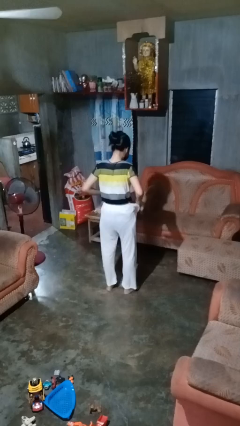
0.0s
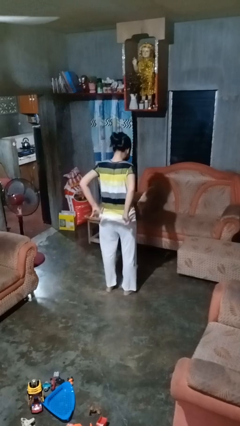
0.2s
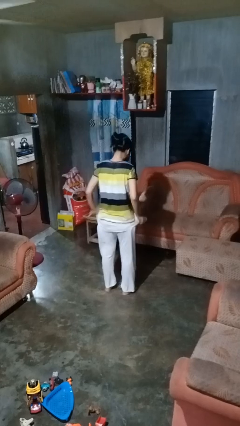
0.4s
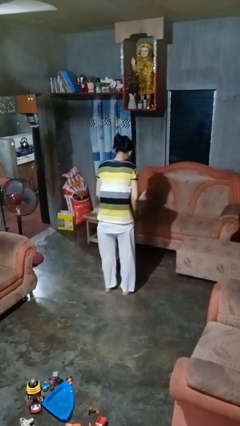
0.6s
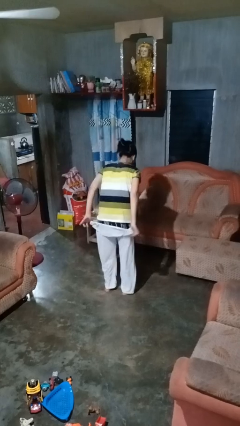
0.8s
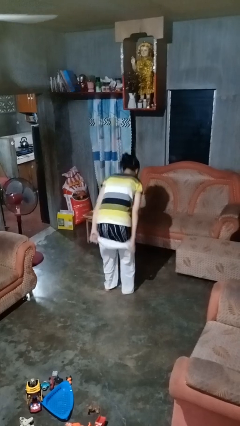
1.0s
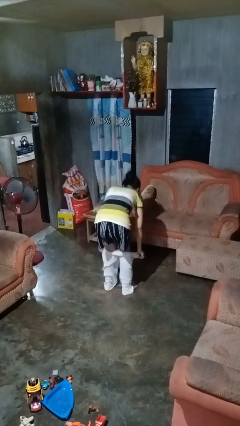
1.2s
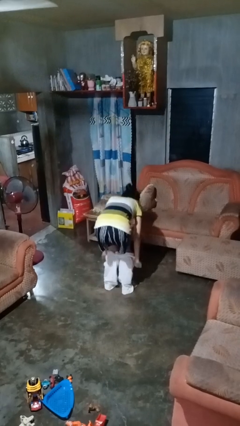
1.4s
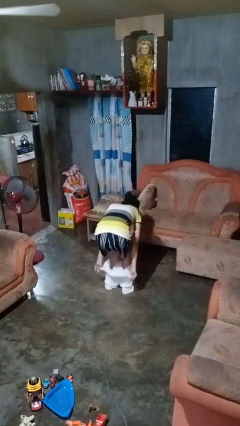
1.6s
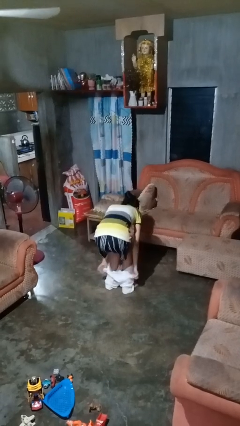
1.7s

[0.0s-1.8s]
person takes off pants

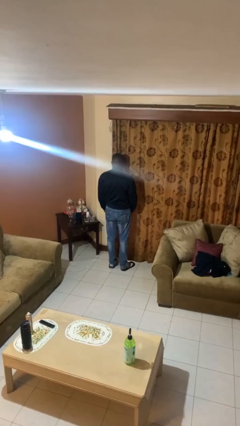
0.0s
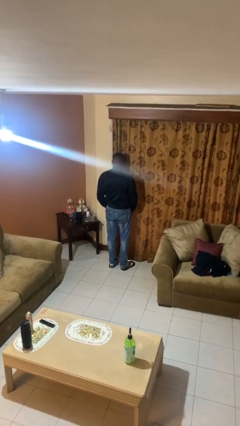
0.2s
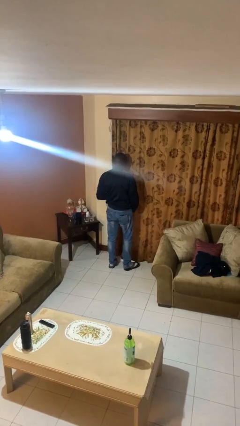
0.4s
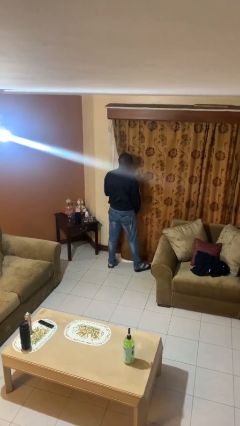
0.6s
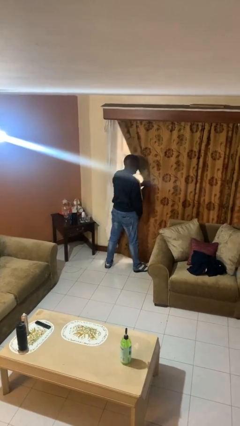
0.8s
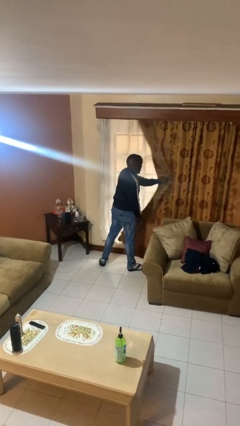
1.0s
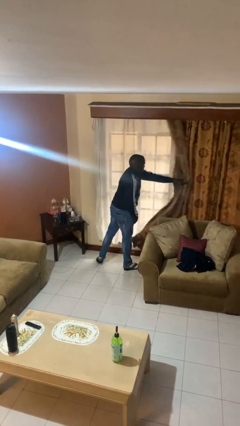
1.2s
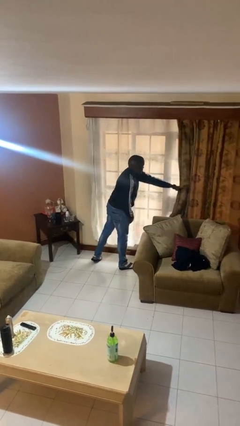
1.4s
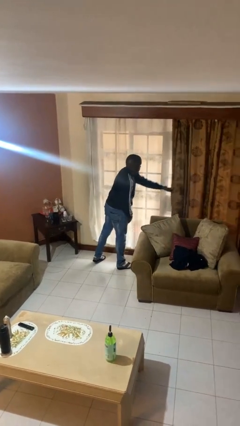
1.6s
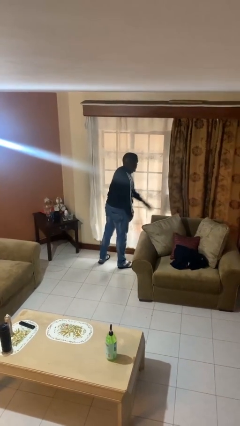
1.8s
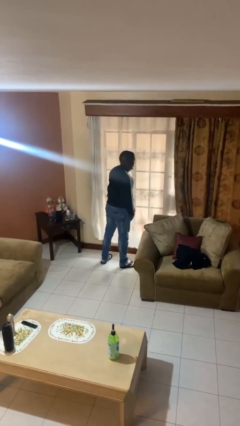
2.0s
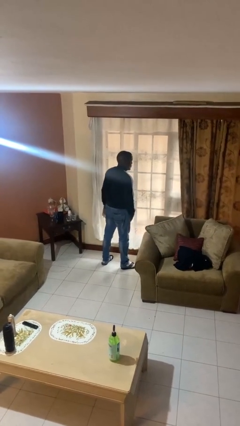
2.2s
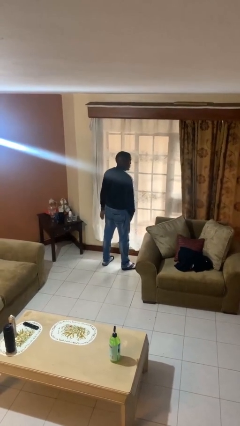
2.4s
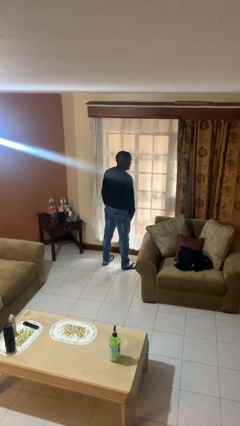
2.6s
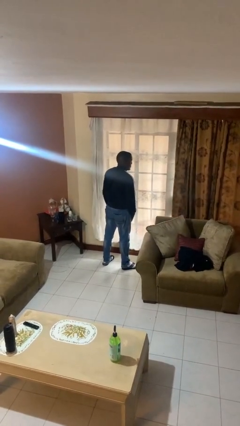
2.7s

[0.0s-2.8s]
person opens curtains

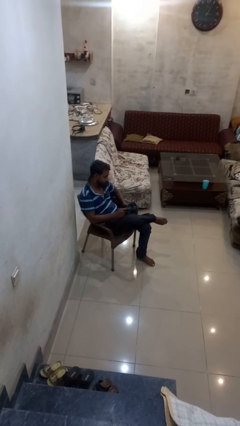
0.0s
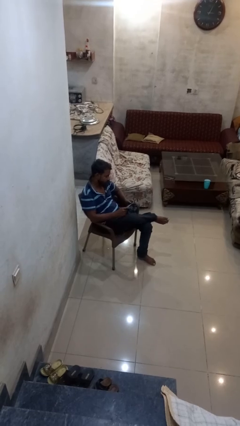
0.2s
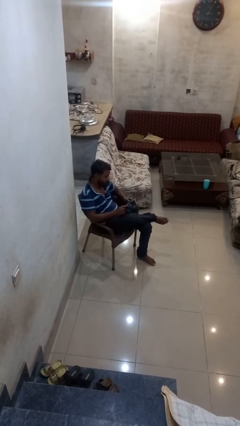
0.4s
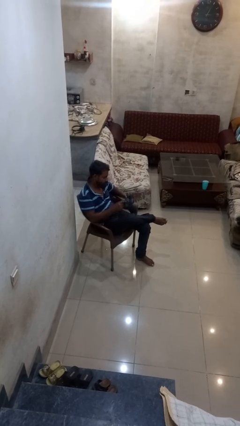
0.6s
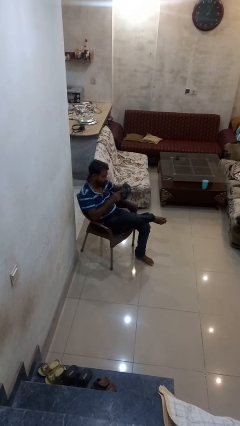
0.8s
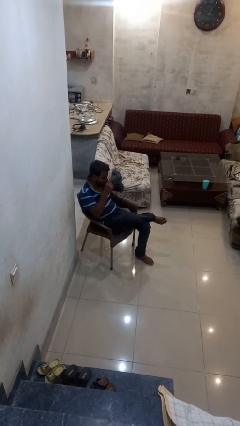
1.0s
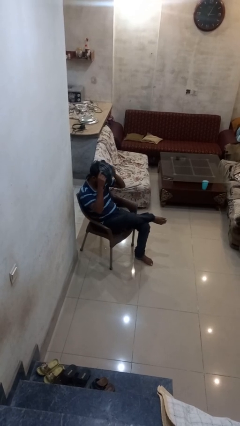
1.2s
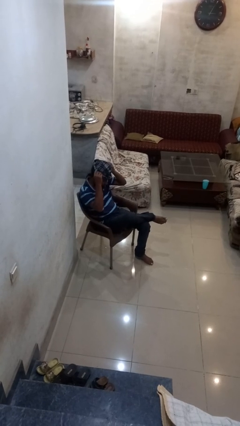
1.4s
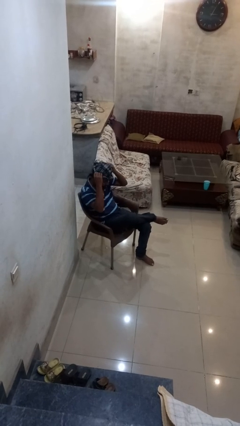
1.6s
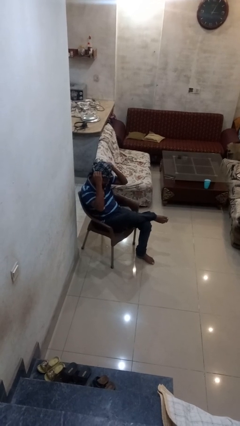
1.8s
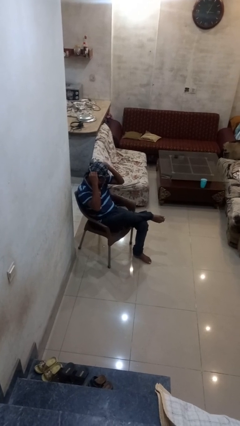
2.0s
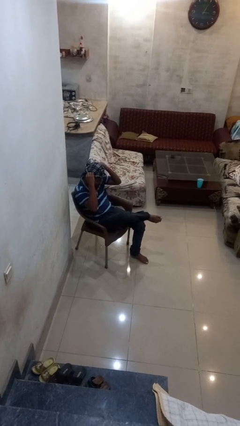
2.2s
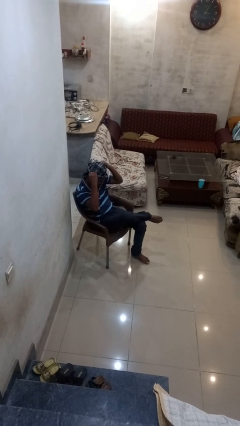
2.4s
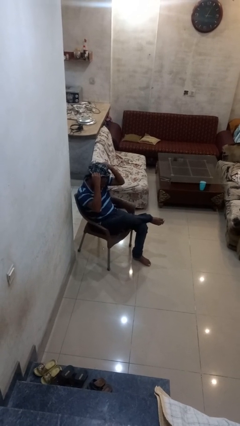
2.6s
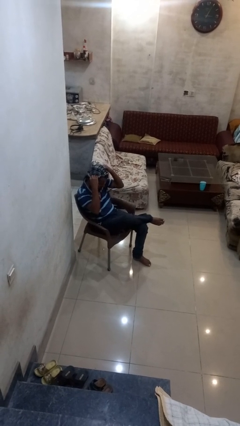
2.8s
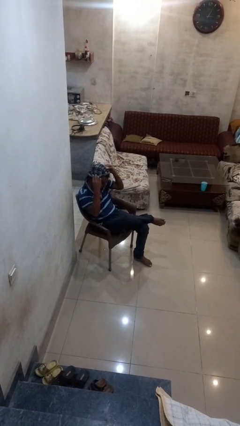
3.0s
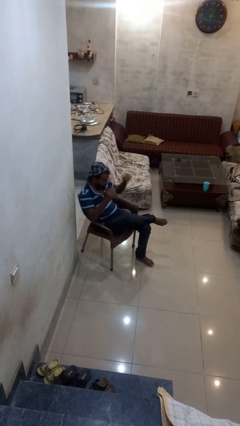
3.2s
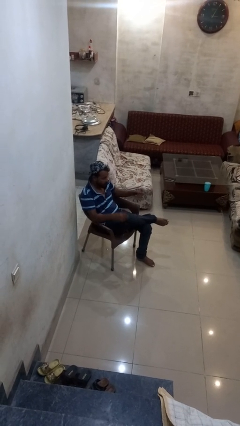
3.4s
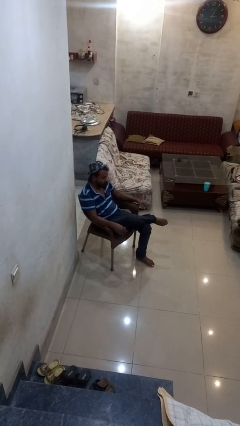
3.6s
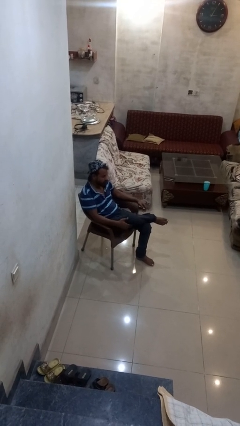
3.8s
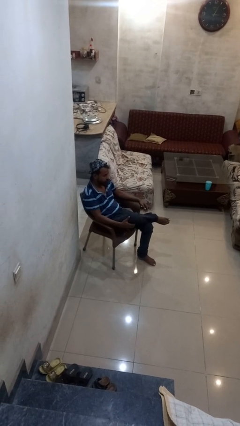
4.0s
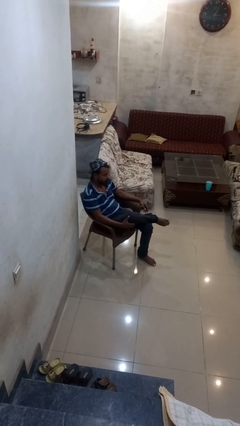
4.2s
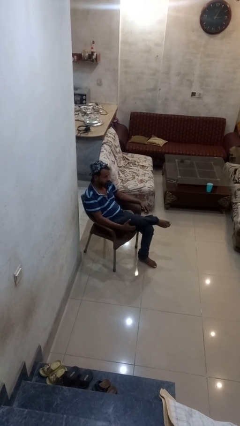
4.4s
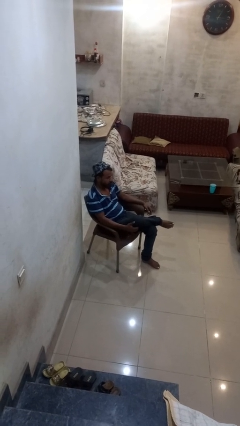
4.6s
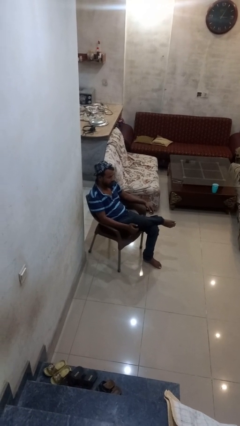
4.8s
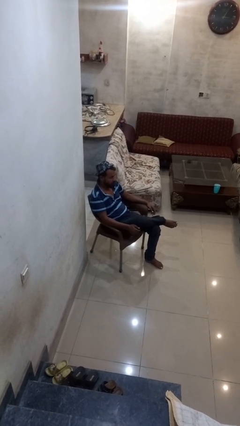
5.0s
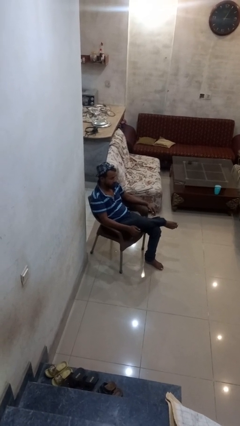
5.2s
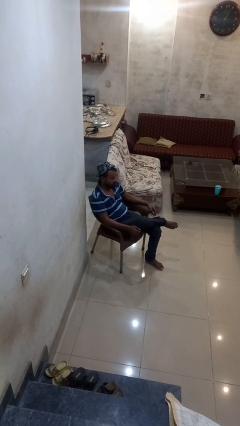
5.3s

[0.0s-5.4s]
person puts on hat

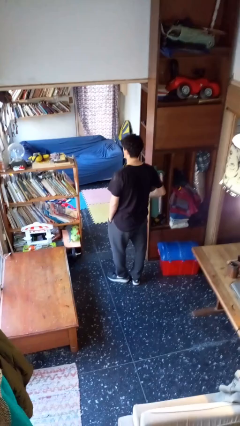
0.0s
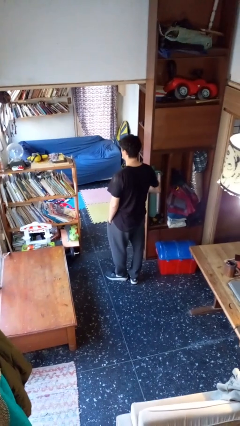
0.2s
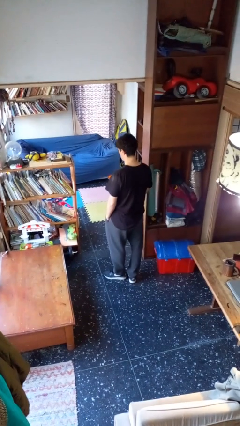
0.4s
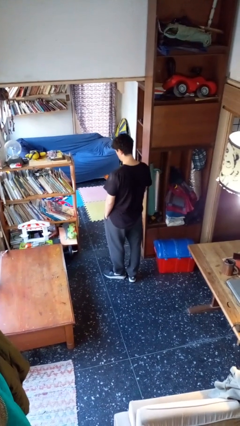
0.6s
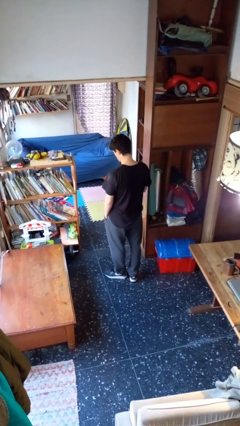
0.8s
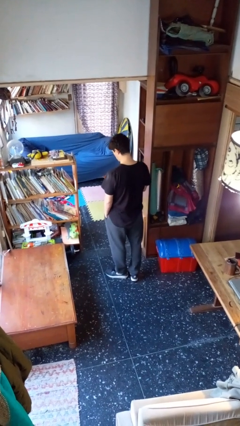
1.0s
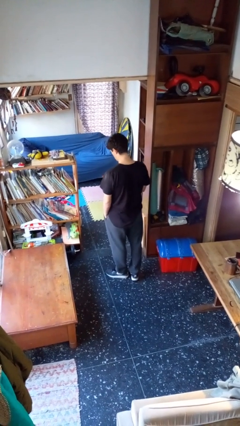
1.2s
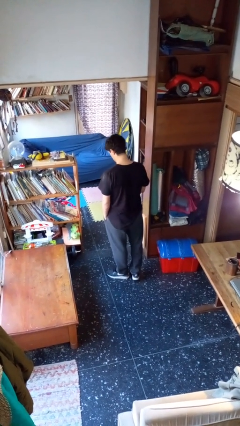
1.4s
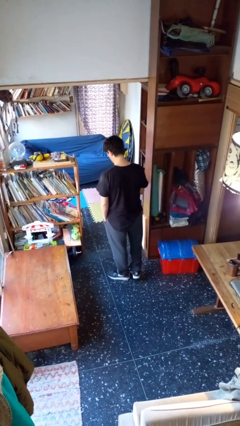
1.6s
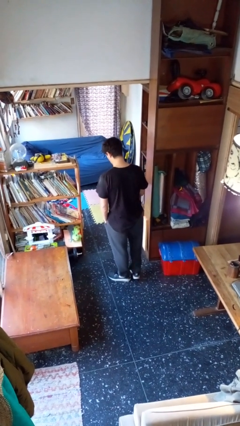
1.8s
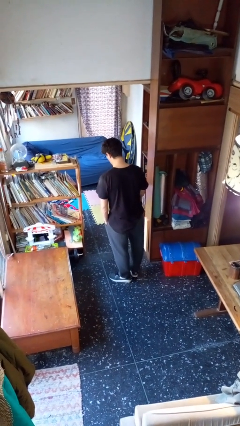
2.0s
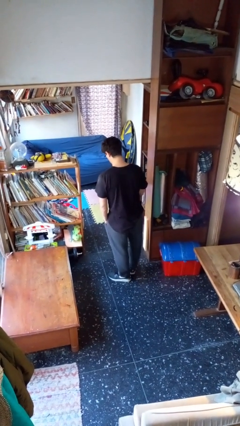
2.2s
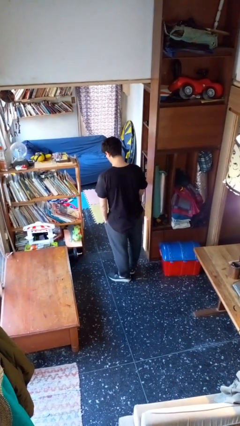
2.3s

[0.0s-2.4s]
person takes phone from pocket

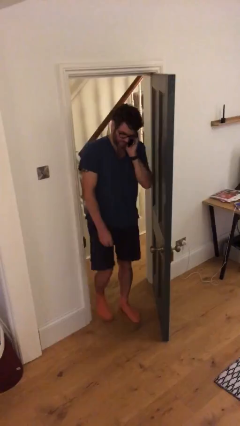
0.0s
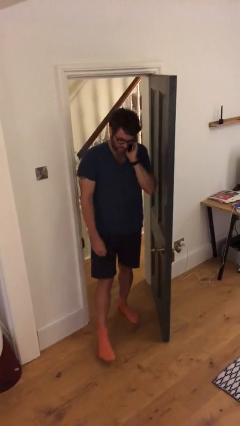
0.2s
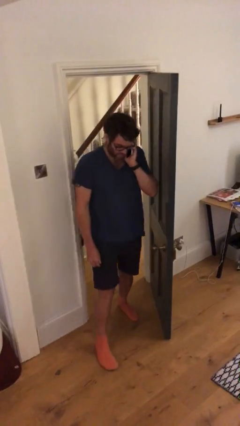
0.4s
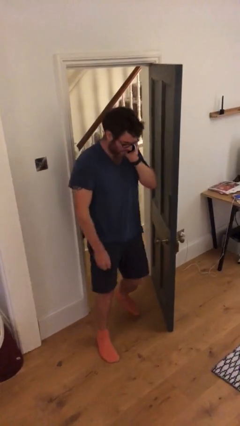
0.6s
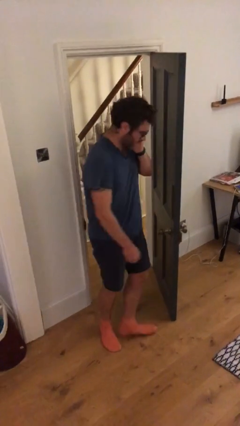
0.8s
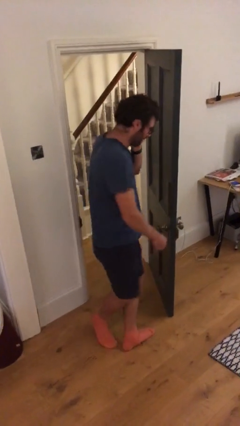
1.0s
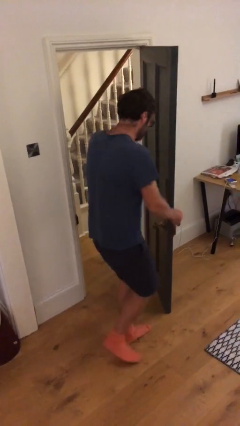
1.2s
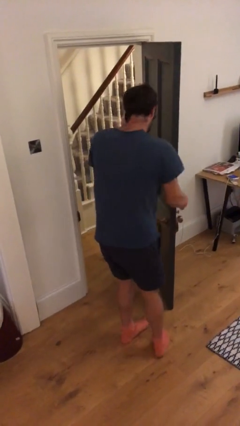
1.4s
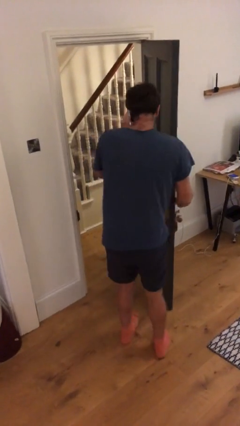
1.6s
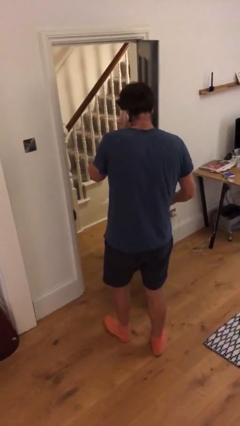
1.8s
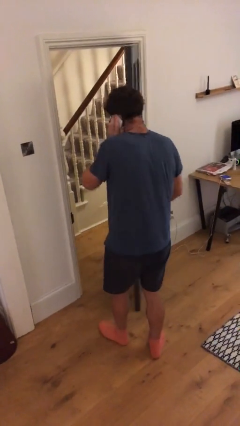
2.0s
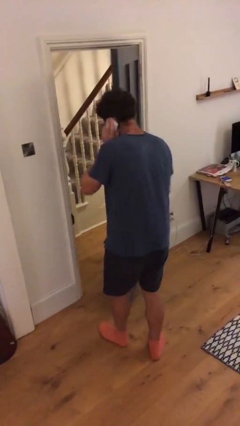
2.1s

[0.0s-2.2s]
person enters scene through structure

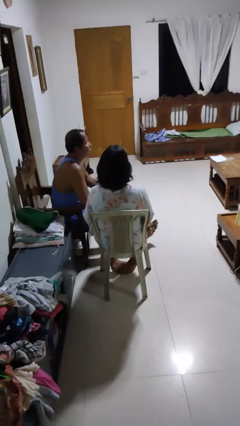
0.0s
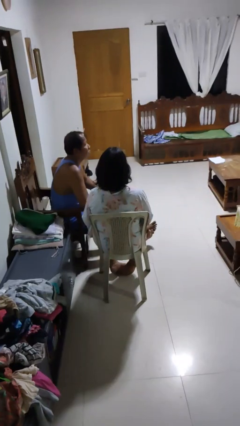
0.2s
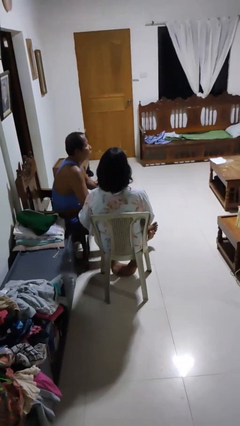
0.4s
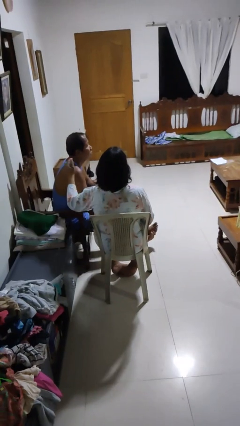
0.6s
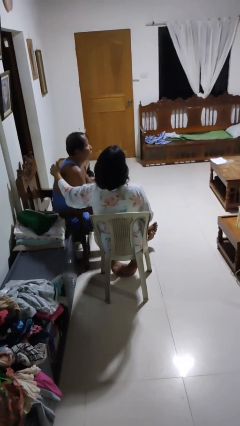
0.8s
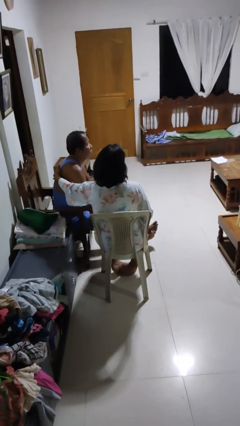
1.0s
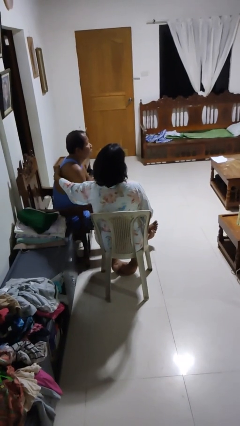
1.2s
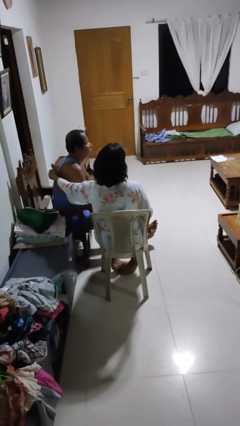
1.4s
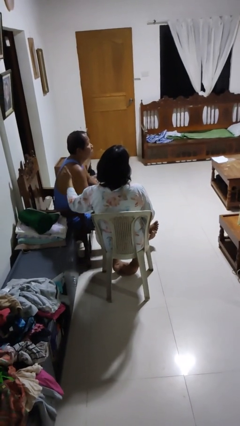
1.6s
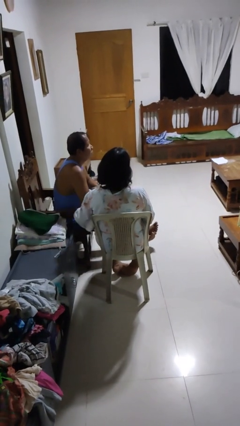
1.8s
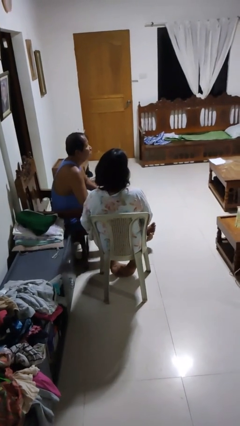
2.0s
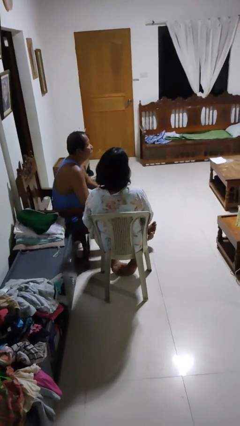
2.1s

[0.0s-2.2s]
person touches back of person

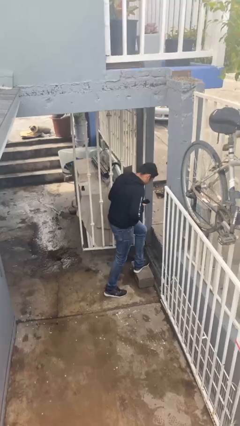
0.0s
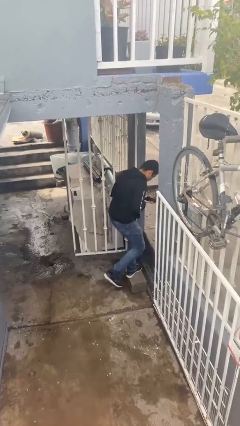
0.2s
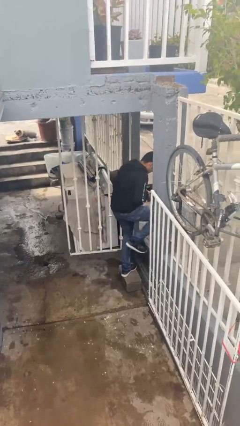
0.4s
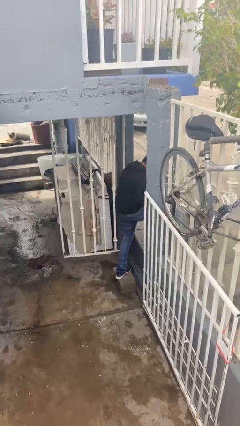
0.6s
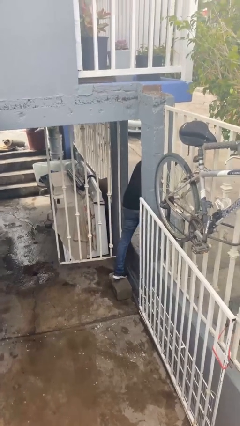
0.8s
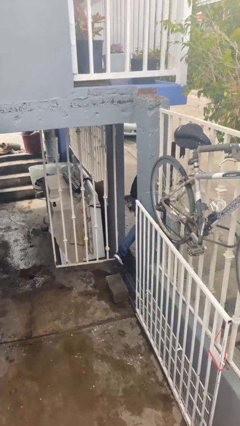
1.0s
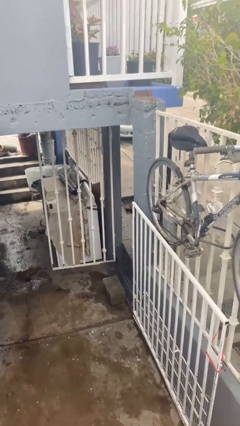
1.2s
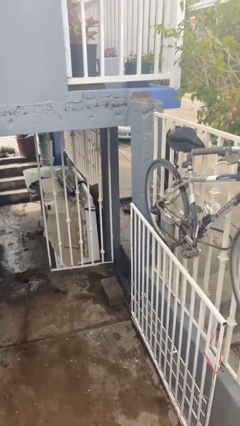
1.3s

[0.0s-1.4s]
person exits scene through structure
